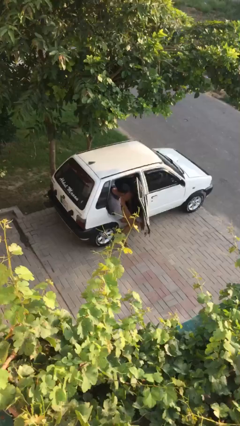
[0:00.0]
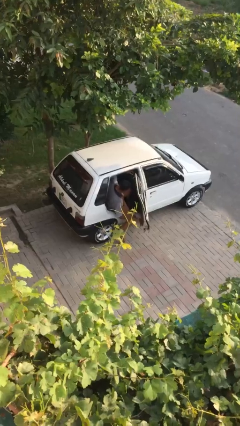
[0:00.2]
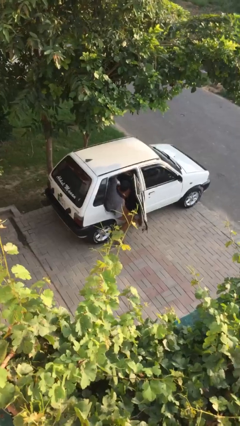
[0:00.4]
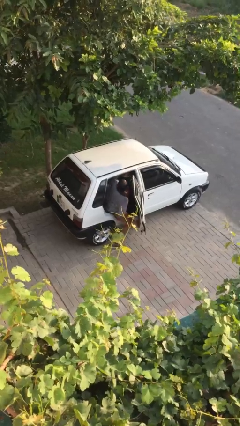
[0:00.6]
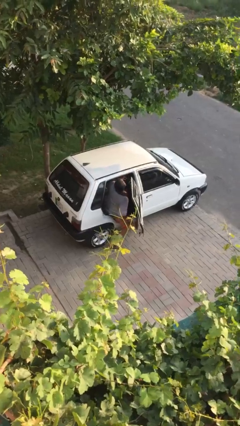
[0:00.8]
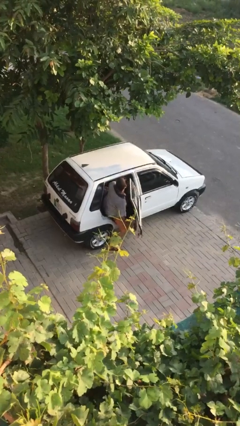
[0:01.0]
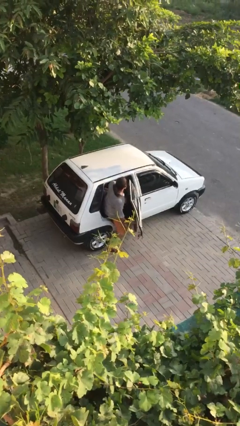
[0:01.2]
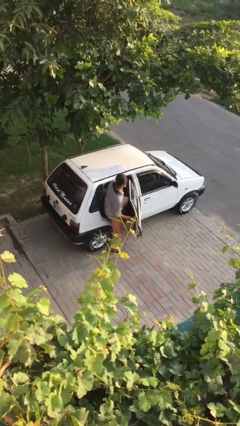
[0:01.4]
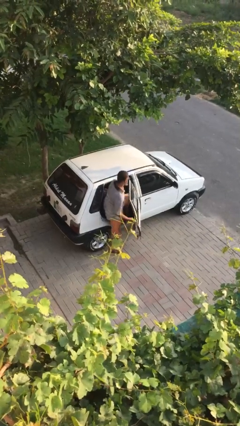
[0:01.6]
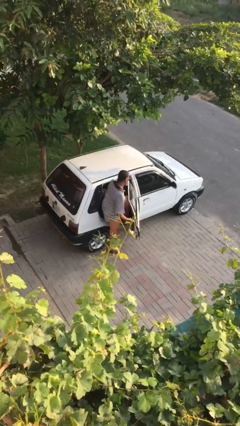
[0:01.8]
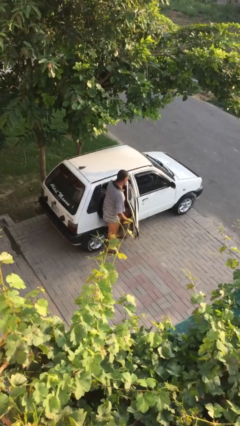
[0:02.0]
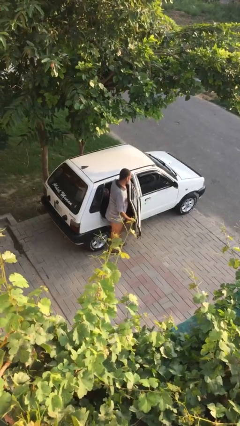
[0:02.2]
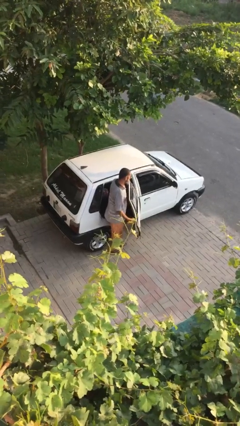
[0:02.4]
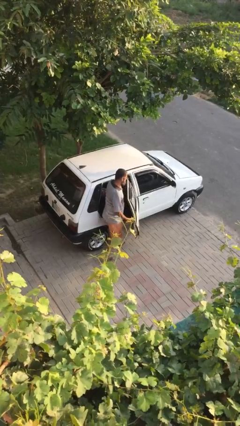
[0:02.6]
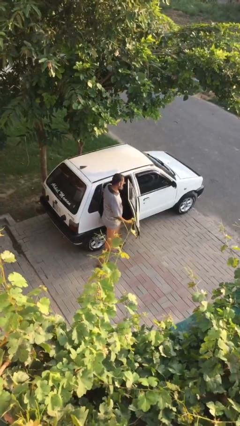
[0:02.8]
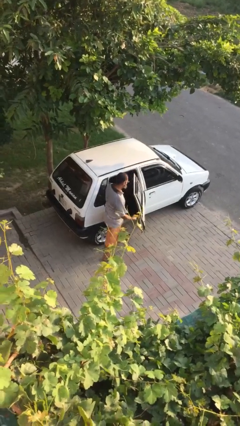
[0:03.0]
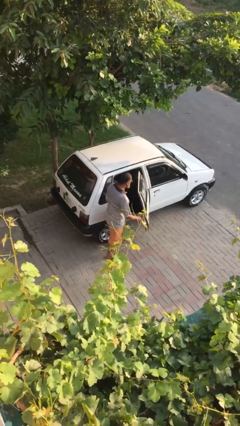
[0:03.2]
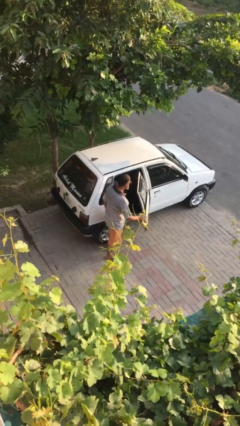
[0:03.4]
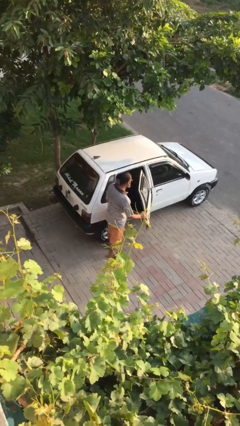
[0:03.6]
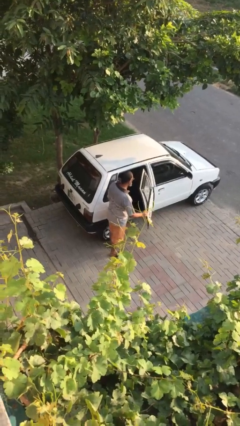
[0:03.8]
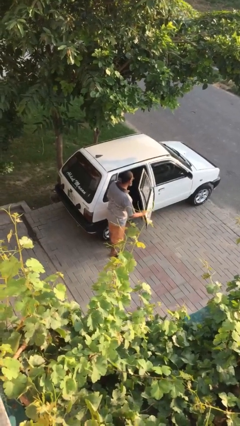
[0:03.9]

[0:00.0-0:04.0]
person exits car

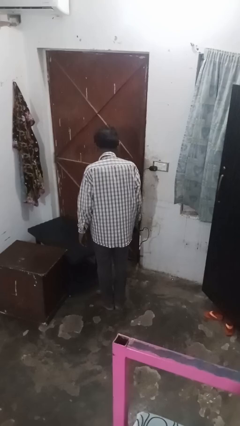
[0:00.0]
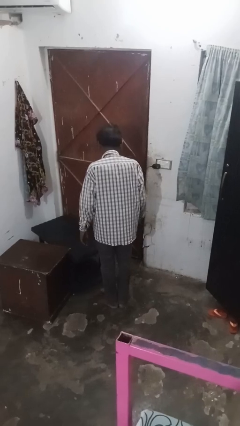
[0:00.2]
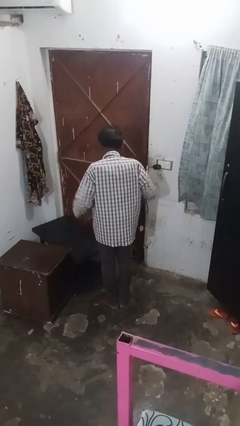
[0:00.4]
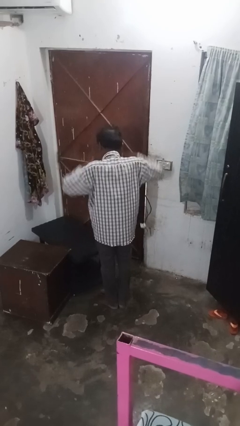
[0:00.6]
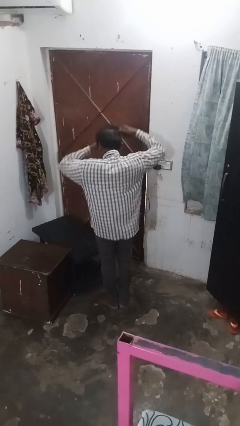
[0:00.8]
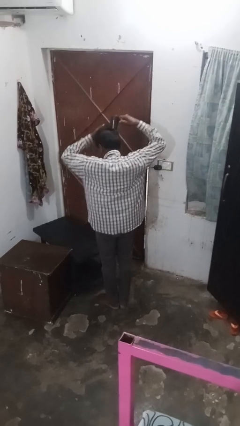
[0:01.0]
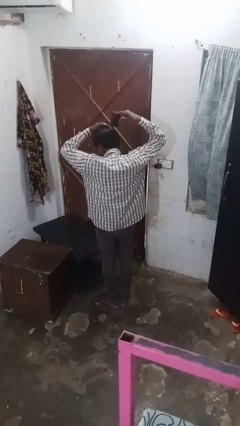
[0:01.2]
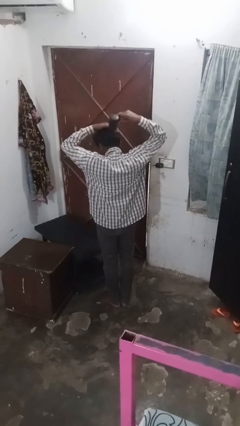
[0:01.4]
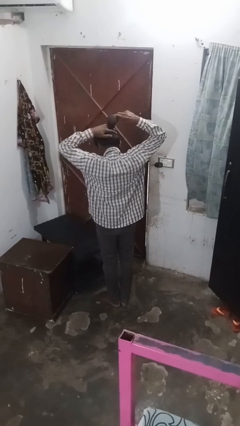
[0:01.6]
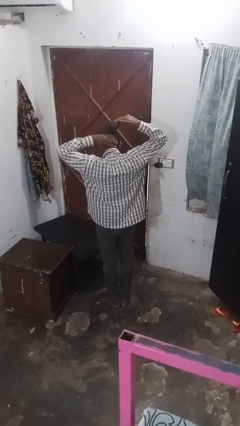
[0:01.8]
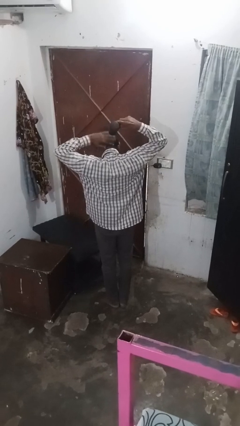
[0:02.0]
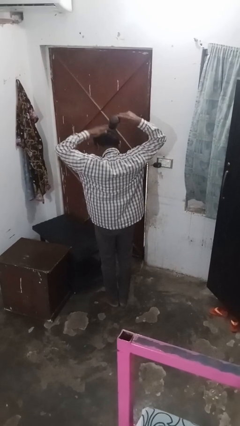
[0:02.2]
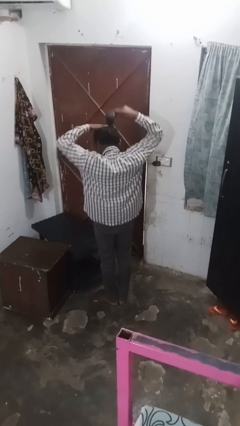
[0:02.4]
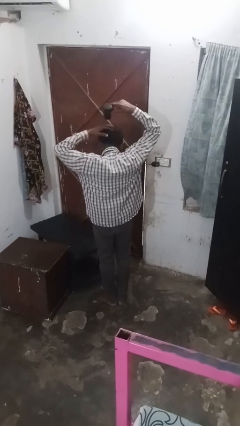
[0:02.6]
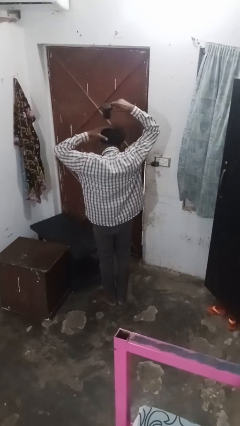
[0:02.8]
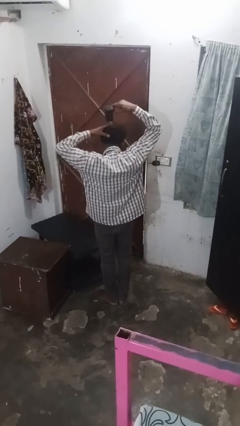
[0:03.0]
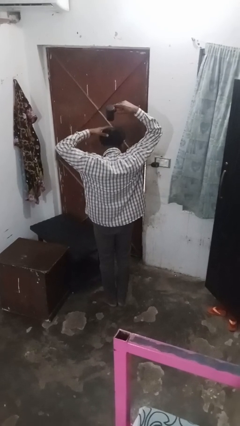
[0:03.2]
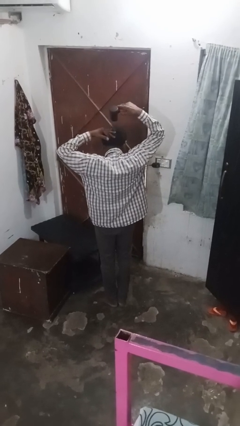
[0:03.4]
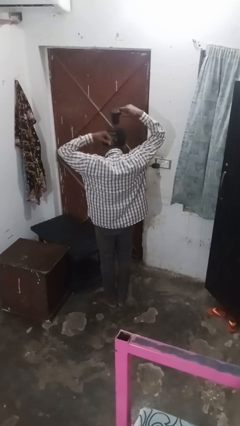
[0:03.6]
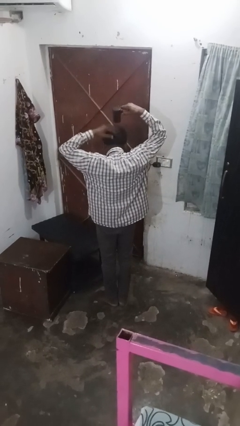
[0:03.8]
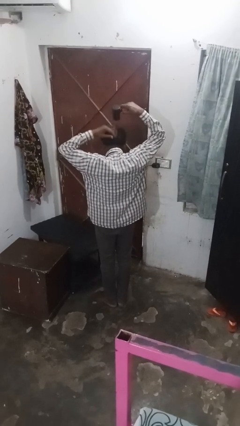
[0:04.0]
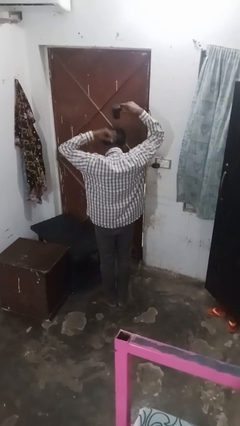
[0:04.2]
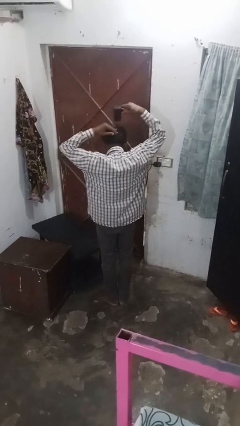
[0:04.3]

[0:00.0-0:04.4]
person dries hair with towel

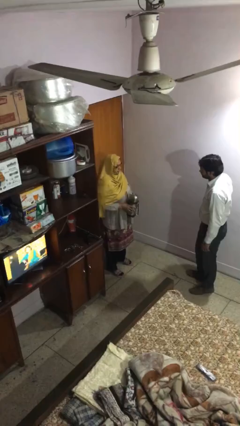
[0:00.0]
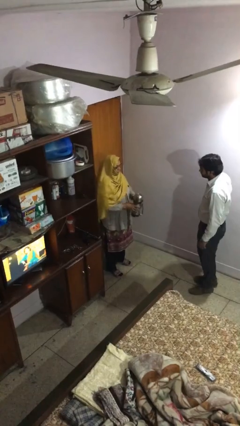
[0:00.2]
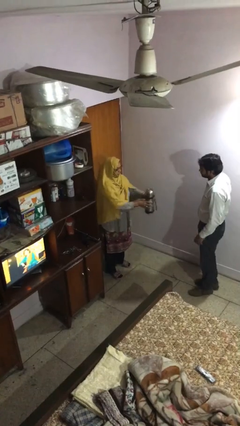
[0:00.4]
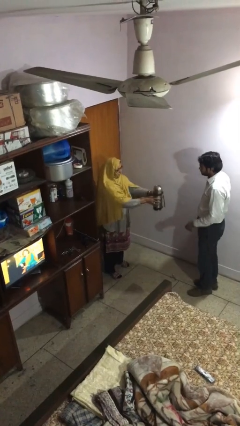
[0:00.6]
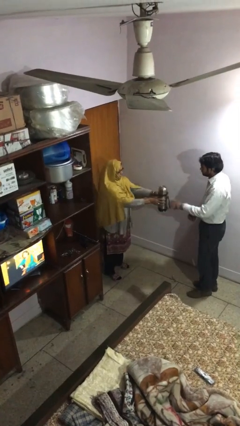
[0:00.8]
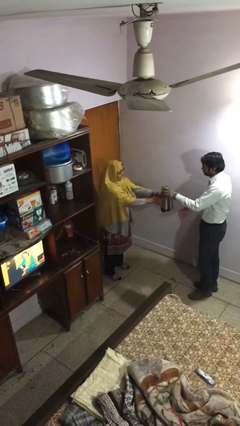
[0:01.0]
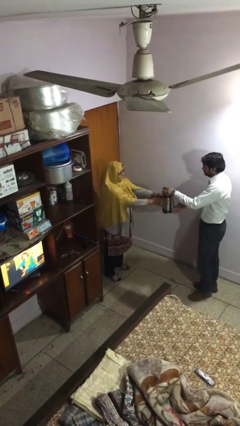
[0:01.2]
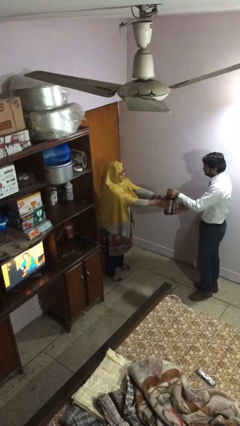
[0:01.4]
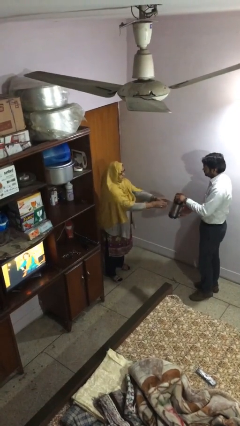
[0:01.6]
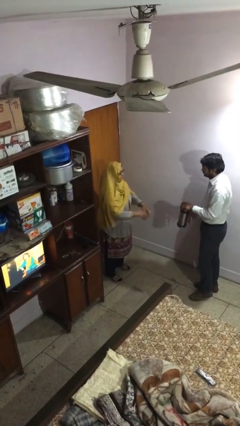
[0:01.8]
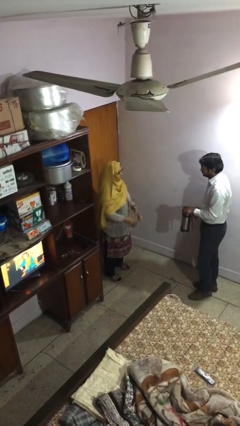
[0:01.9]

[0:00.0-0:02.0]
person transfers object to person

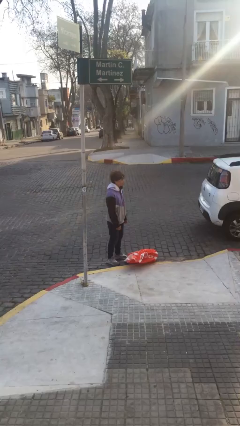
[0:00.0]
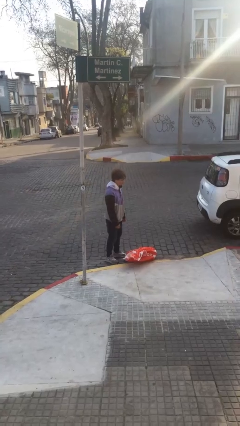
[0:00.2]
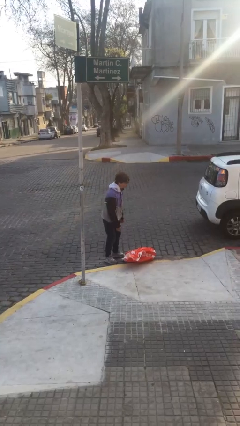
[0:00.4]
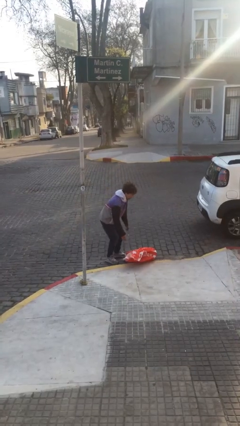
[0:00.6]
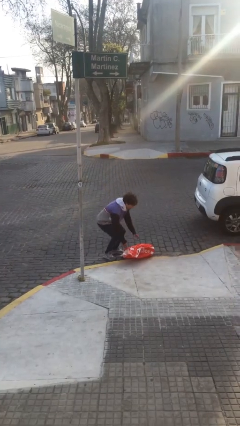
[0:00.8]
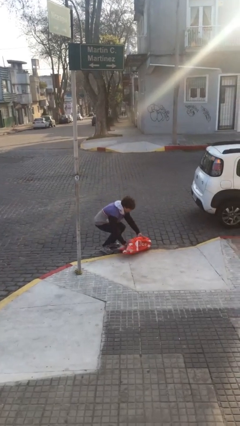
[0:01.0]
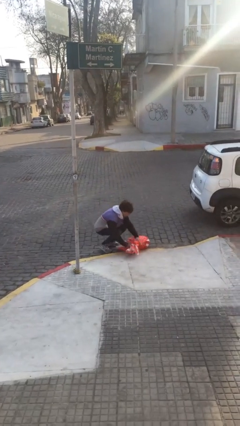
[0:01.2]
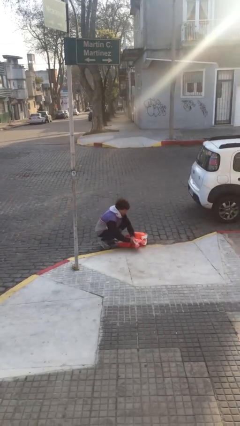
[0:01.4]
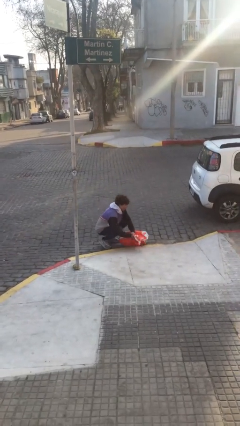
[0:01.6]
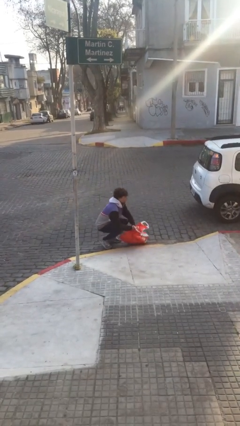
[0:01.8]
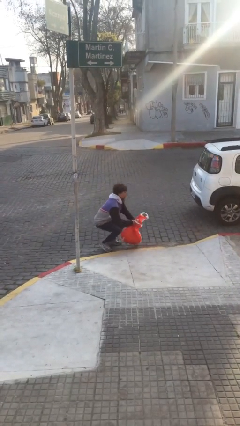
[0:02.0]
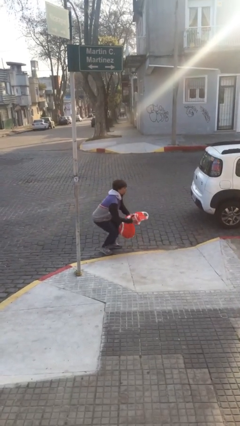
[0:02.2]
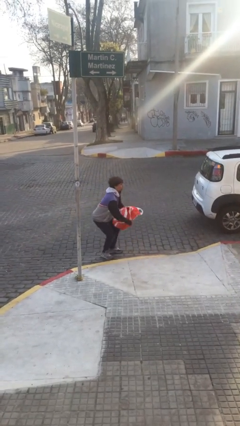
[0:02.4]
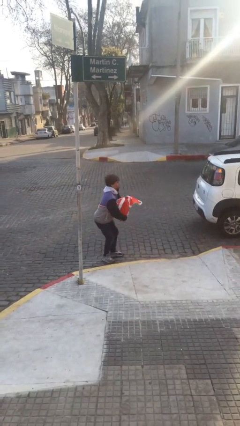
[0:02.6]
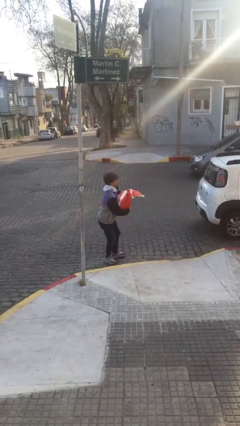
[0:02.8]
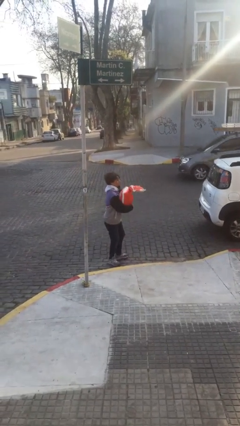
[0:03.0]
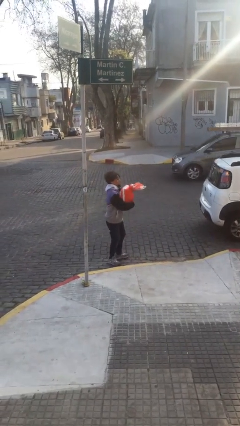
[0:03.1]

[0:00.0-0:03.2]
person picks up object from floor

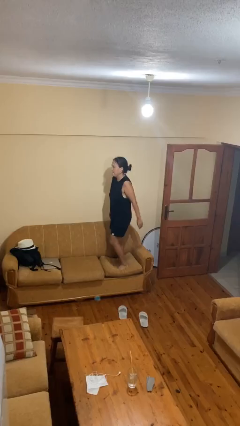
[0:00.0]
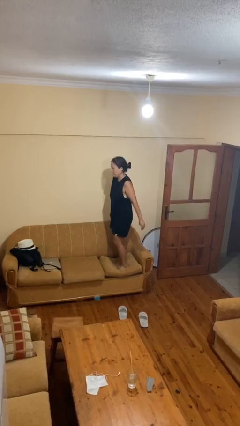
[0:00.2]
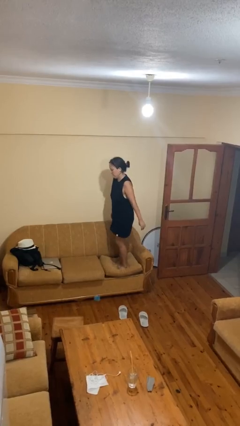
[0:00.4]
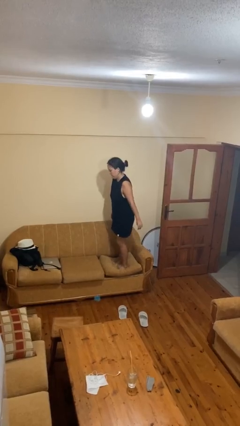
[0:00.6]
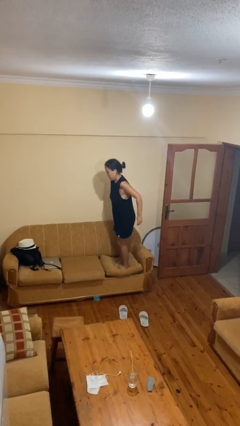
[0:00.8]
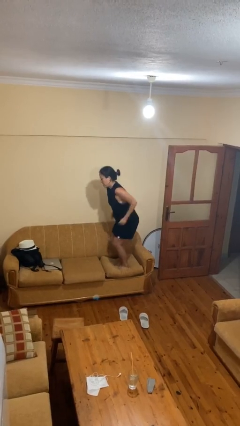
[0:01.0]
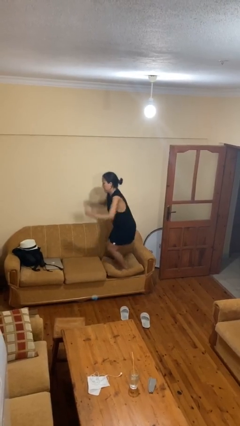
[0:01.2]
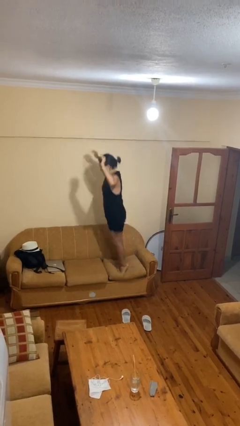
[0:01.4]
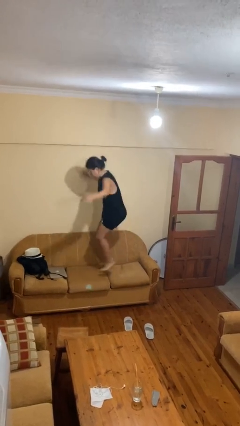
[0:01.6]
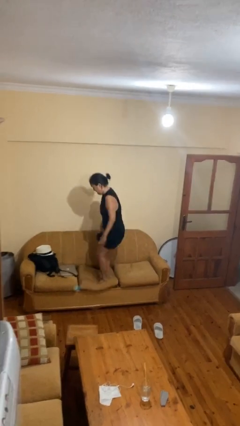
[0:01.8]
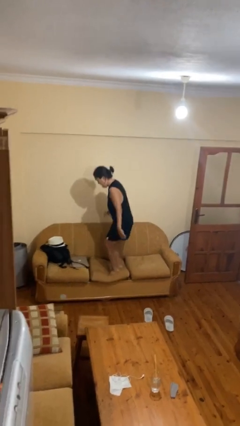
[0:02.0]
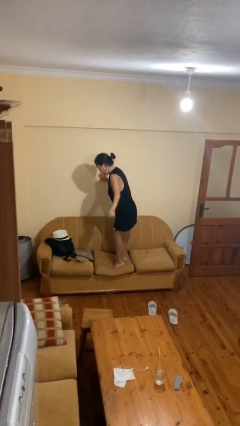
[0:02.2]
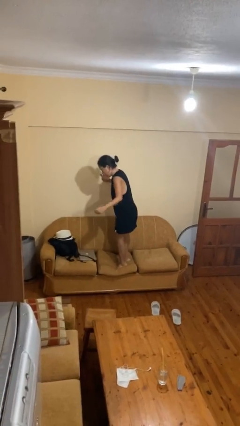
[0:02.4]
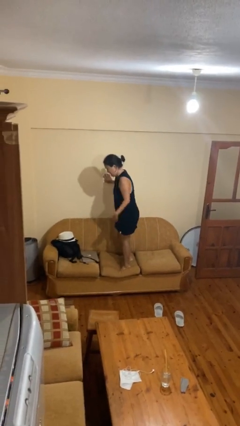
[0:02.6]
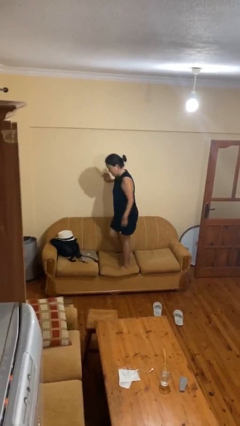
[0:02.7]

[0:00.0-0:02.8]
person jumps on couch

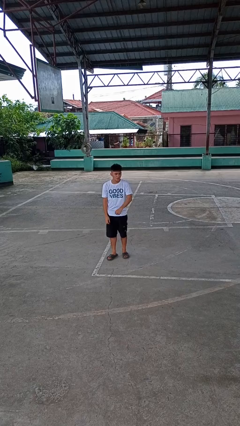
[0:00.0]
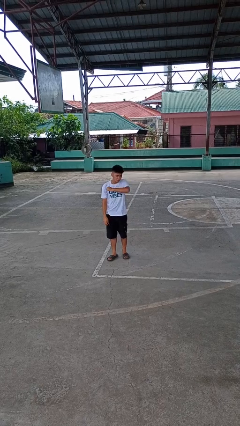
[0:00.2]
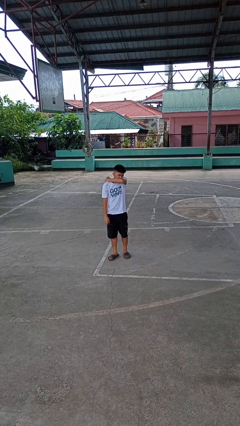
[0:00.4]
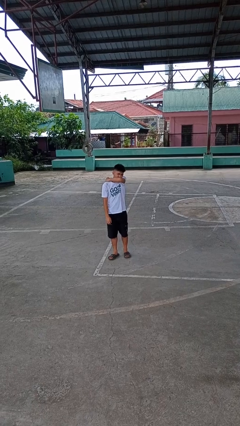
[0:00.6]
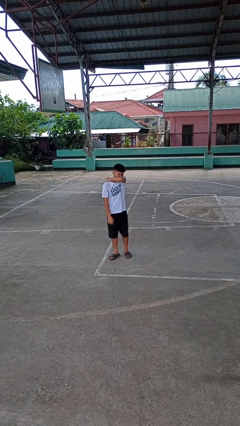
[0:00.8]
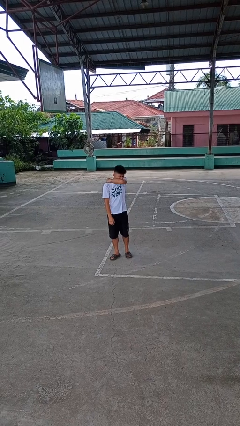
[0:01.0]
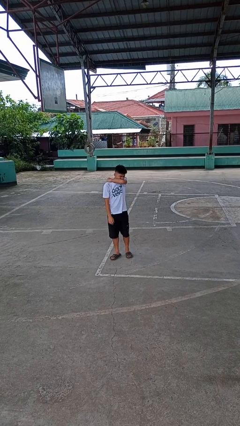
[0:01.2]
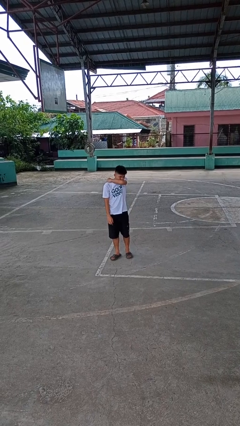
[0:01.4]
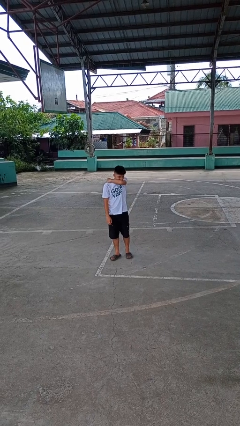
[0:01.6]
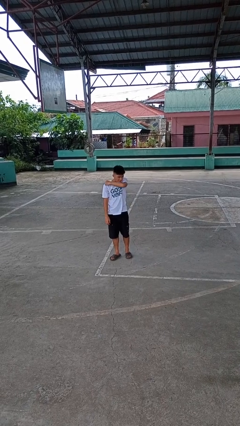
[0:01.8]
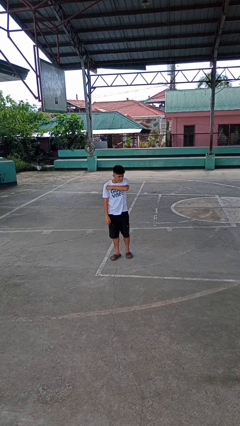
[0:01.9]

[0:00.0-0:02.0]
person sneezes into arm
